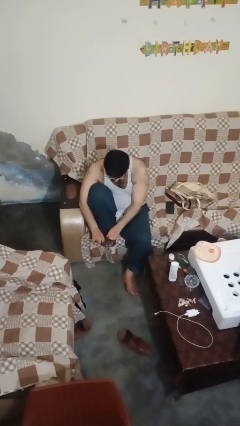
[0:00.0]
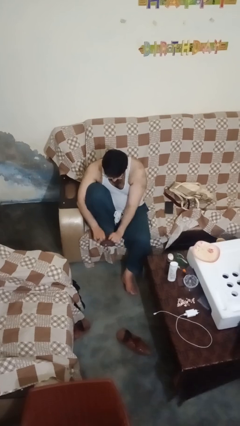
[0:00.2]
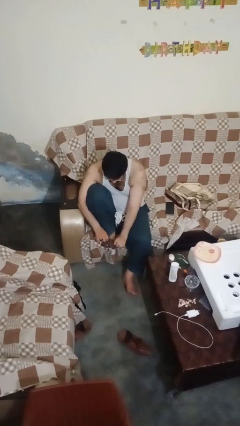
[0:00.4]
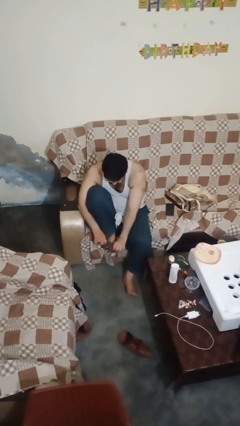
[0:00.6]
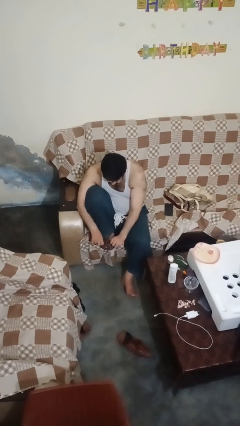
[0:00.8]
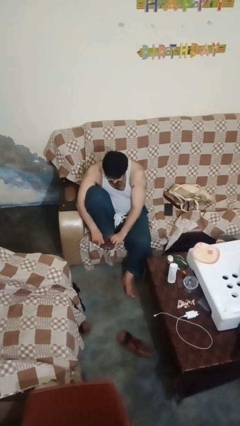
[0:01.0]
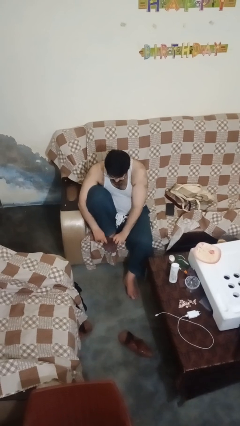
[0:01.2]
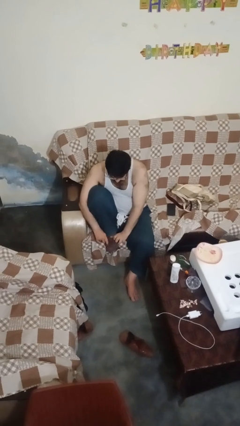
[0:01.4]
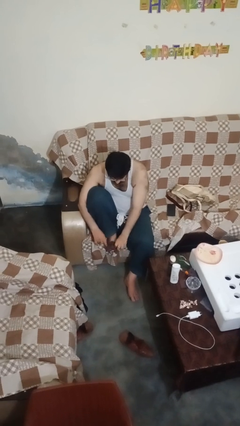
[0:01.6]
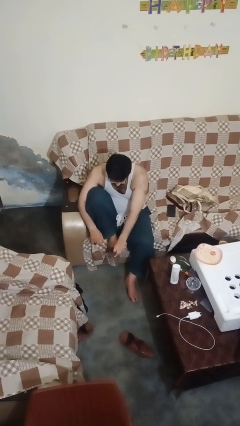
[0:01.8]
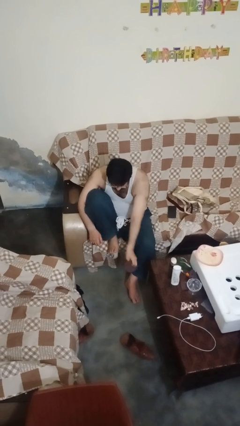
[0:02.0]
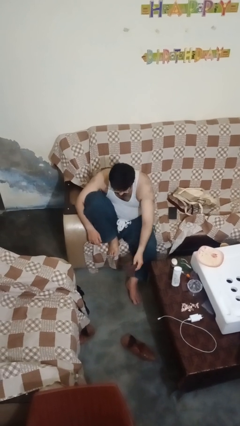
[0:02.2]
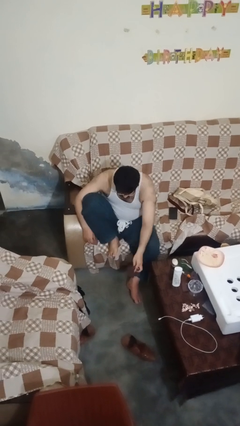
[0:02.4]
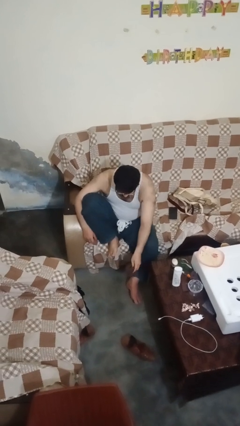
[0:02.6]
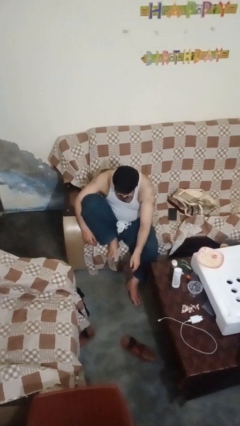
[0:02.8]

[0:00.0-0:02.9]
person takes off socks

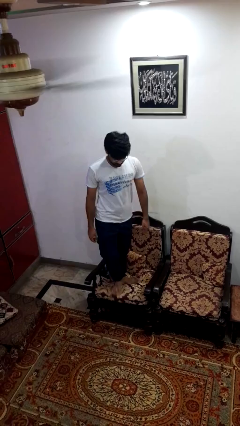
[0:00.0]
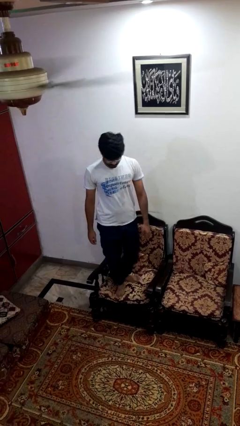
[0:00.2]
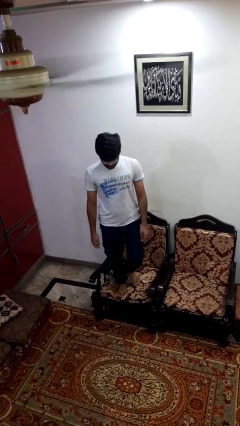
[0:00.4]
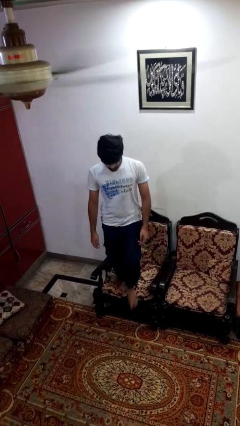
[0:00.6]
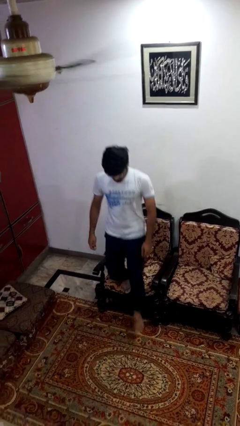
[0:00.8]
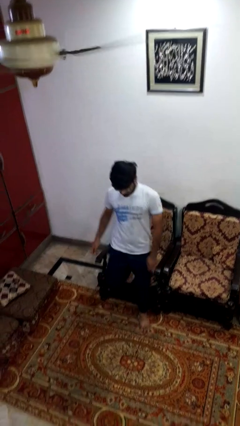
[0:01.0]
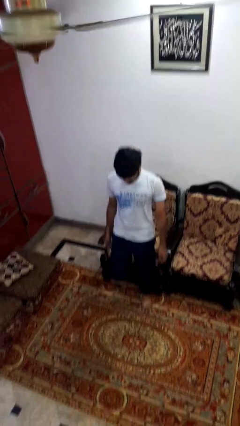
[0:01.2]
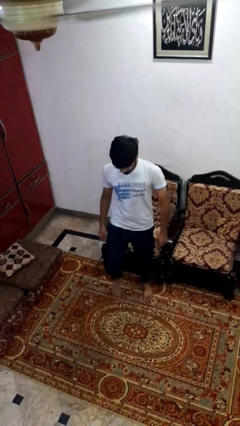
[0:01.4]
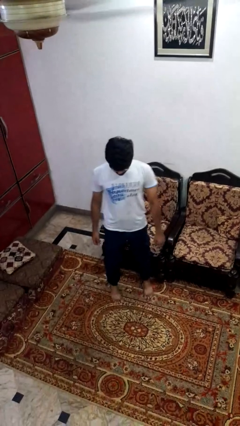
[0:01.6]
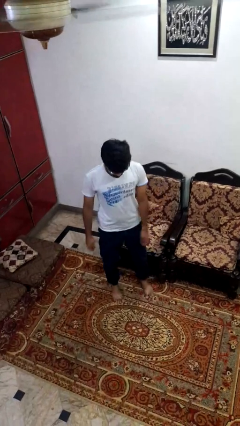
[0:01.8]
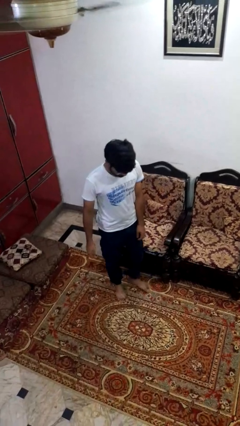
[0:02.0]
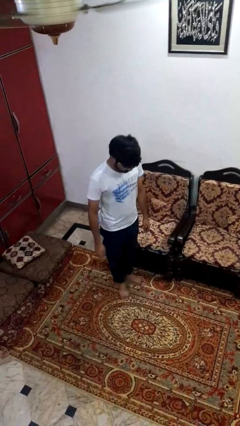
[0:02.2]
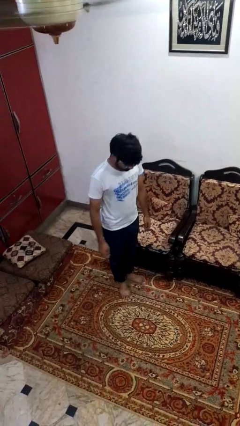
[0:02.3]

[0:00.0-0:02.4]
person climbs off couch

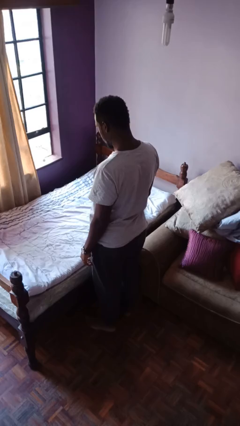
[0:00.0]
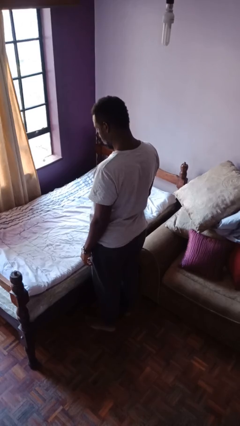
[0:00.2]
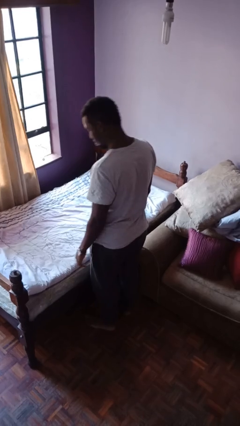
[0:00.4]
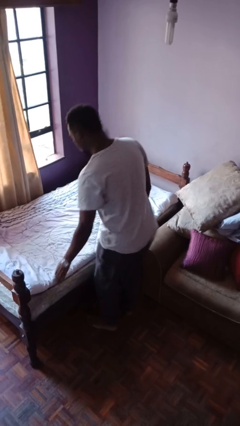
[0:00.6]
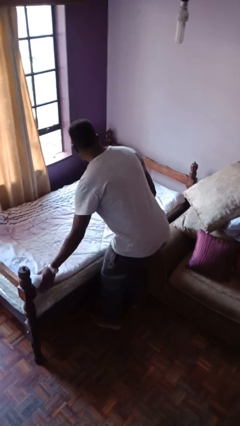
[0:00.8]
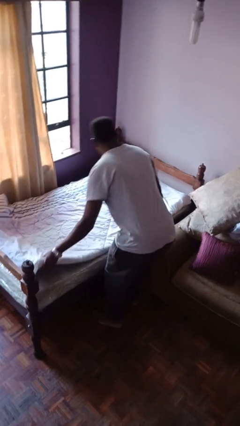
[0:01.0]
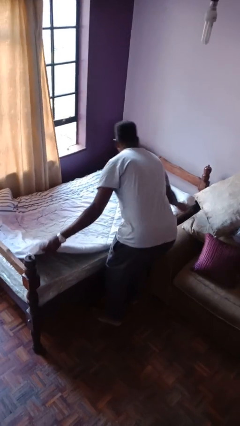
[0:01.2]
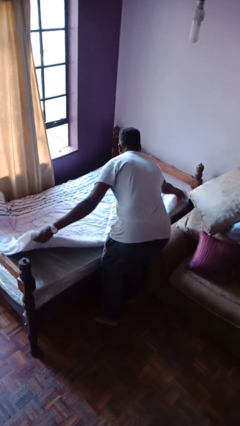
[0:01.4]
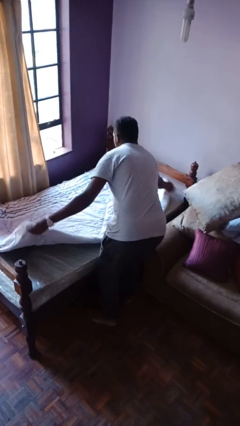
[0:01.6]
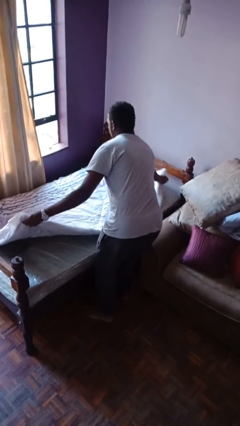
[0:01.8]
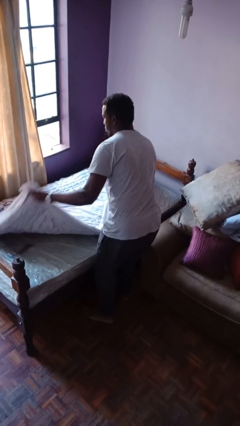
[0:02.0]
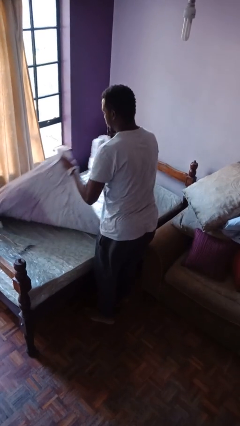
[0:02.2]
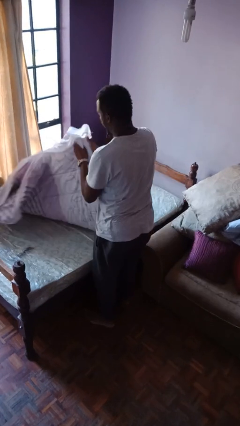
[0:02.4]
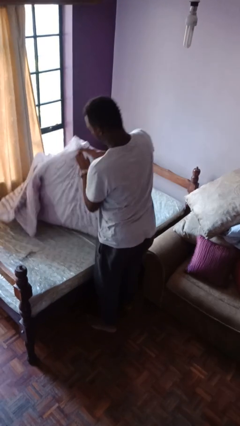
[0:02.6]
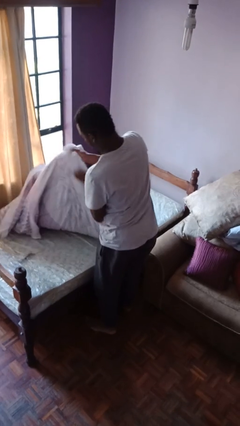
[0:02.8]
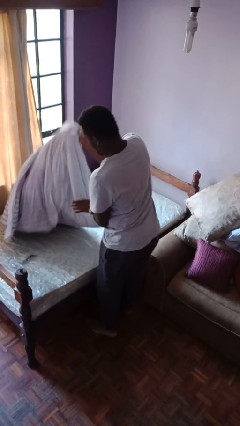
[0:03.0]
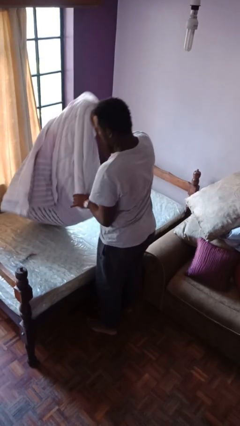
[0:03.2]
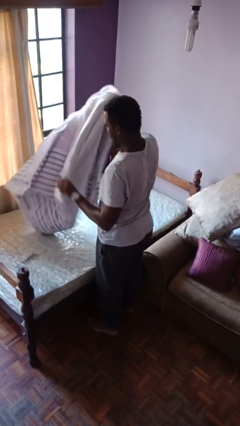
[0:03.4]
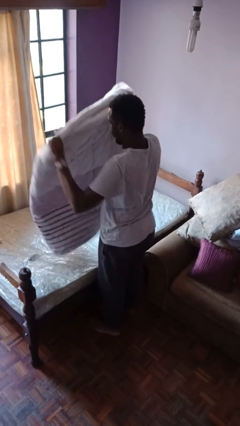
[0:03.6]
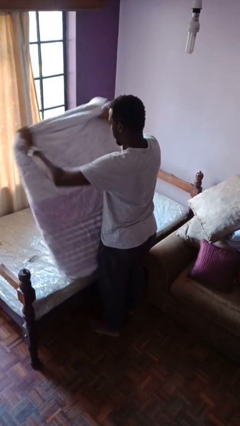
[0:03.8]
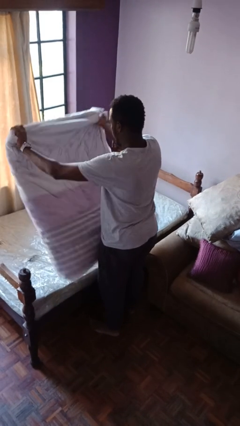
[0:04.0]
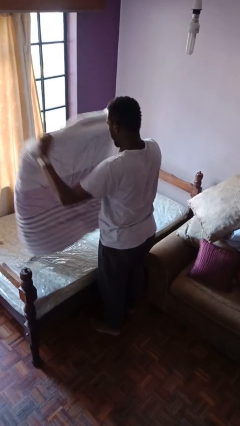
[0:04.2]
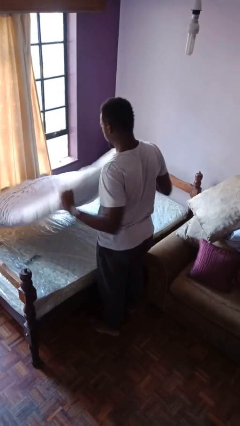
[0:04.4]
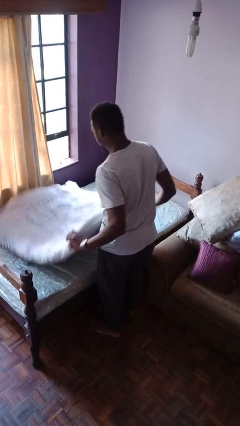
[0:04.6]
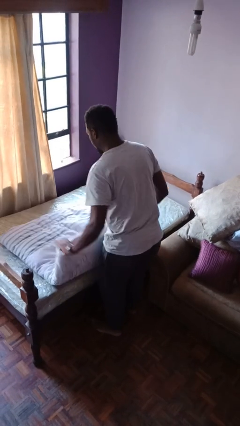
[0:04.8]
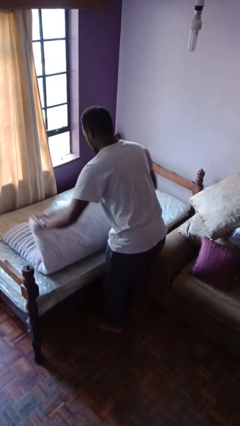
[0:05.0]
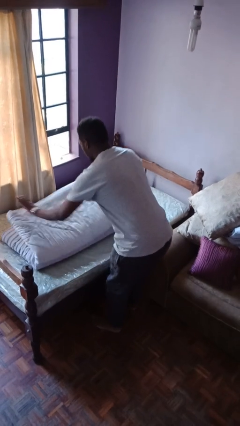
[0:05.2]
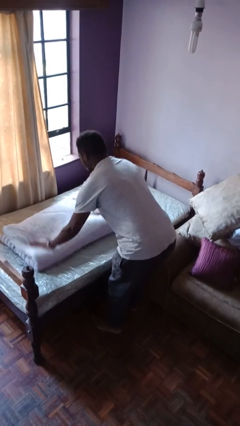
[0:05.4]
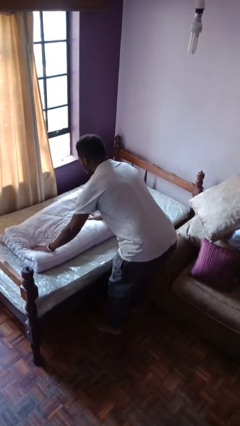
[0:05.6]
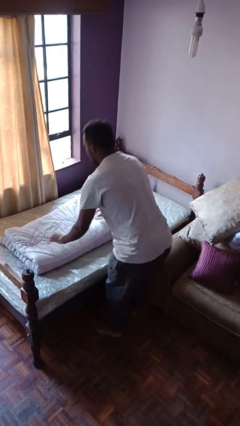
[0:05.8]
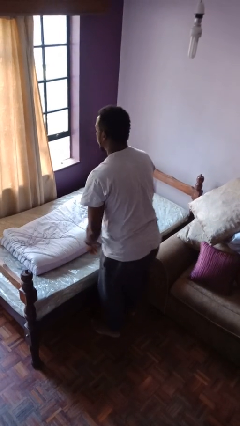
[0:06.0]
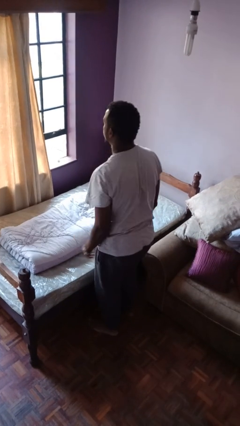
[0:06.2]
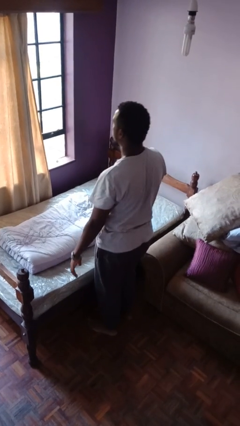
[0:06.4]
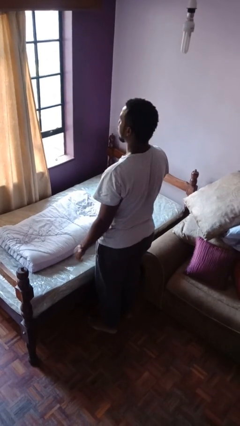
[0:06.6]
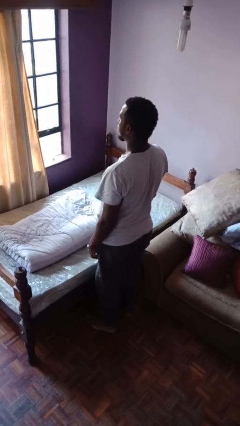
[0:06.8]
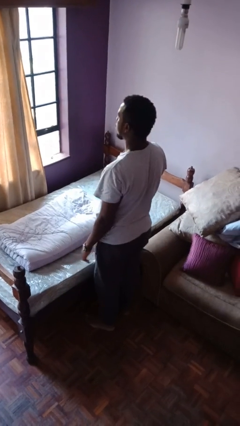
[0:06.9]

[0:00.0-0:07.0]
person folds blanket

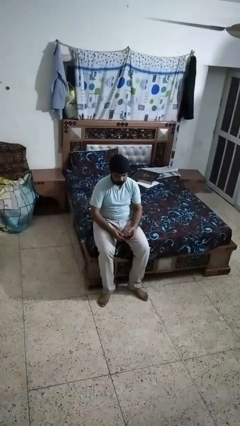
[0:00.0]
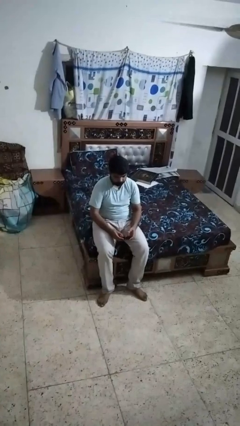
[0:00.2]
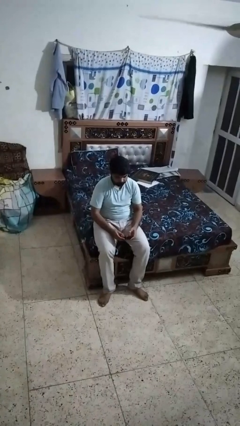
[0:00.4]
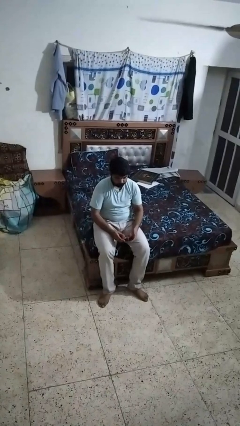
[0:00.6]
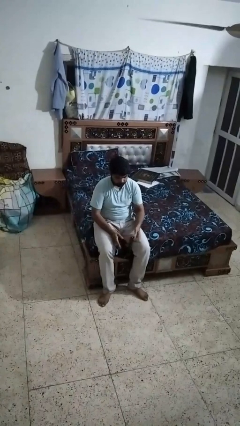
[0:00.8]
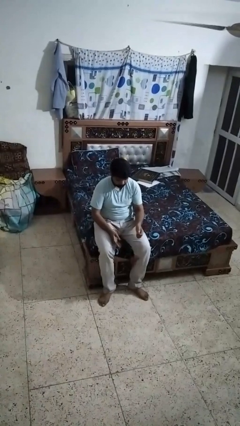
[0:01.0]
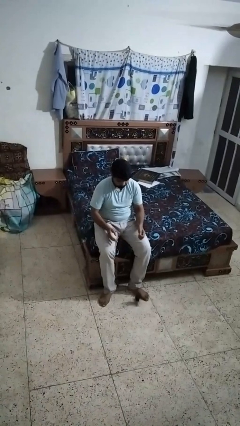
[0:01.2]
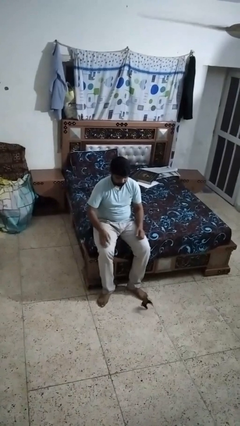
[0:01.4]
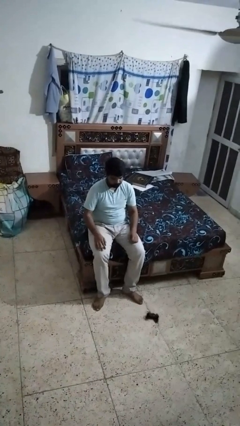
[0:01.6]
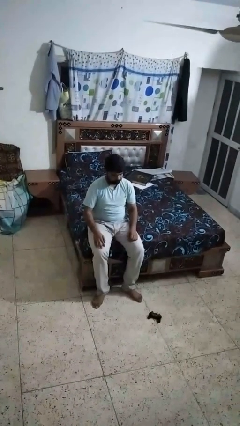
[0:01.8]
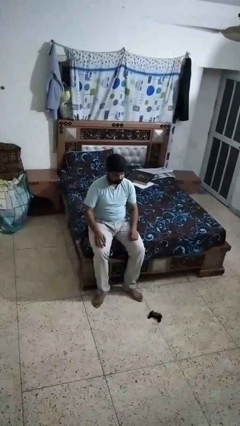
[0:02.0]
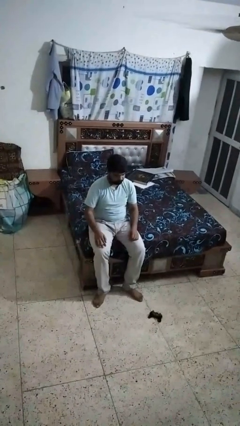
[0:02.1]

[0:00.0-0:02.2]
person drops object

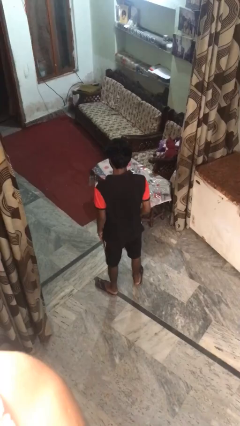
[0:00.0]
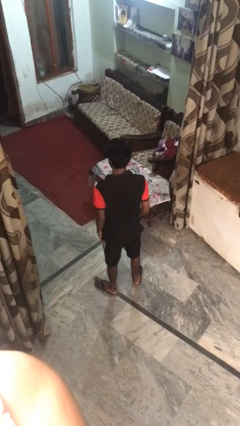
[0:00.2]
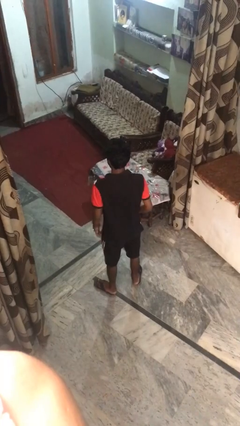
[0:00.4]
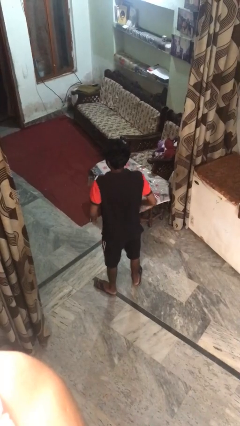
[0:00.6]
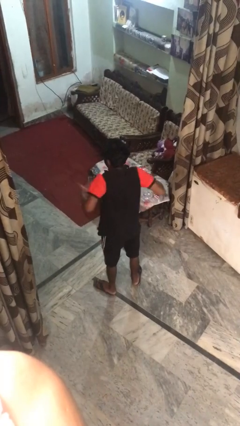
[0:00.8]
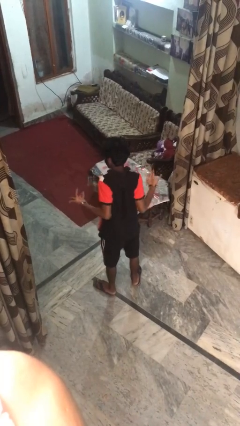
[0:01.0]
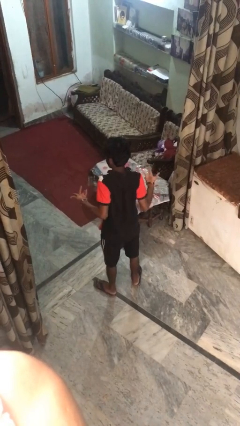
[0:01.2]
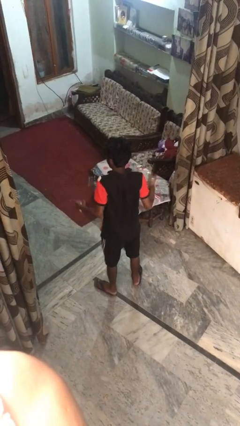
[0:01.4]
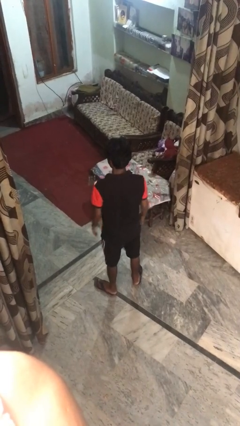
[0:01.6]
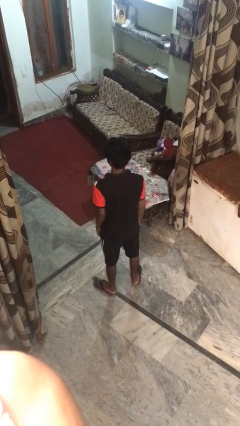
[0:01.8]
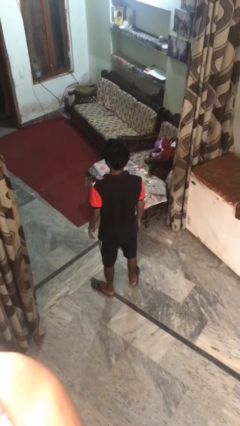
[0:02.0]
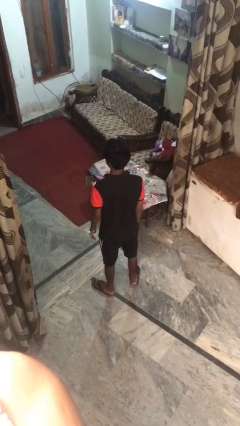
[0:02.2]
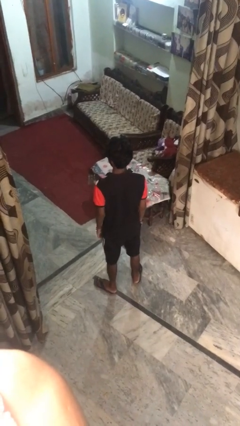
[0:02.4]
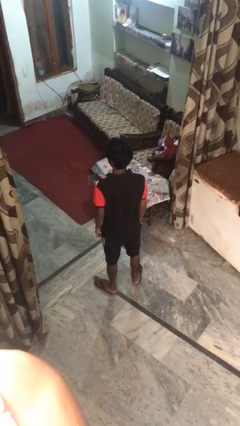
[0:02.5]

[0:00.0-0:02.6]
person shrugs

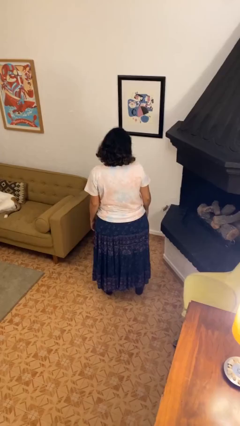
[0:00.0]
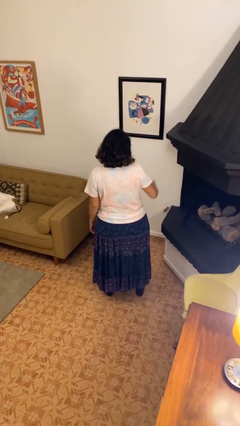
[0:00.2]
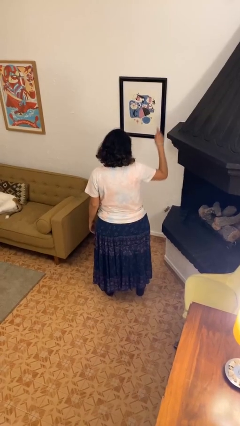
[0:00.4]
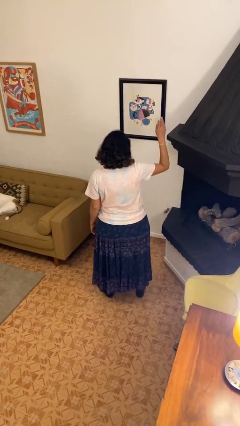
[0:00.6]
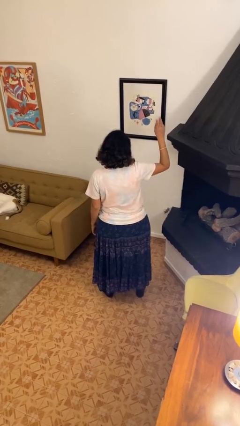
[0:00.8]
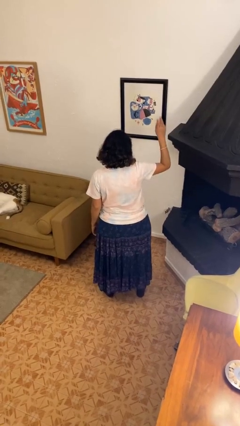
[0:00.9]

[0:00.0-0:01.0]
person gestures raise hand
